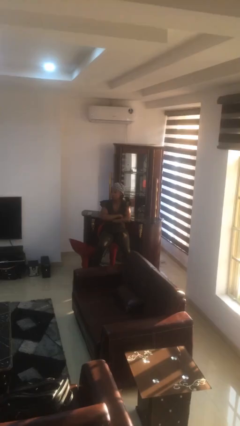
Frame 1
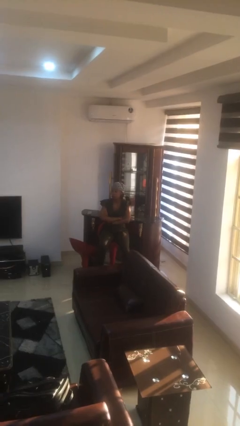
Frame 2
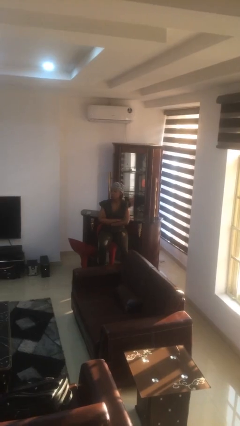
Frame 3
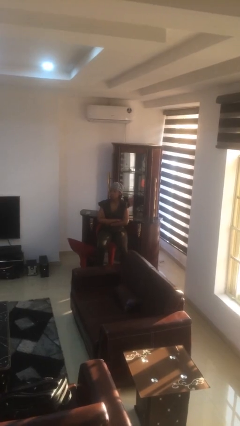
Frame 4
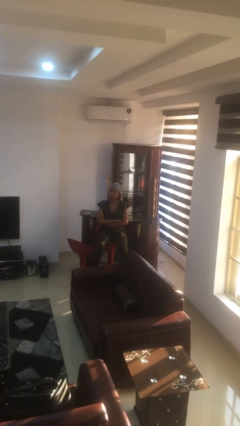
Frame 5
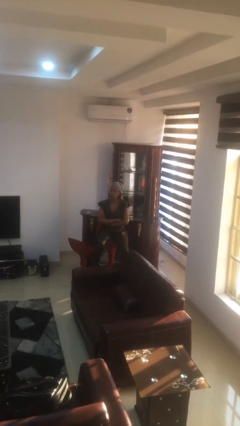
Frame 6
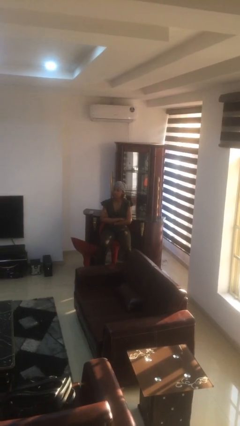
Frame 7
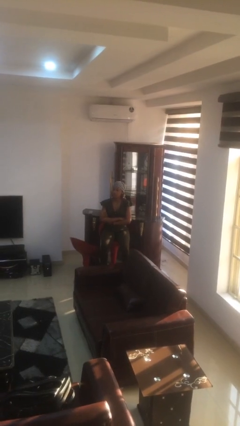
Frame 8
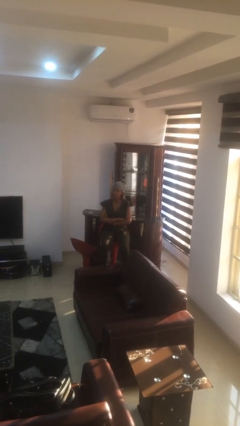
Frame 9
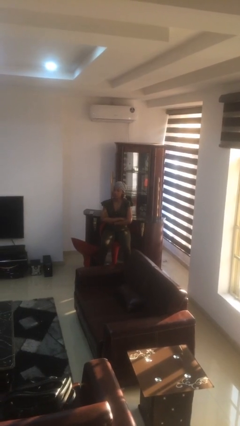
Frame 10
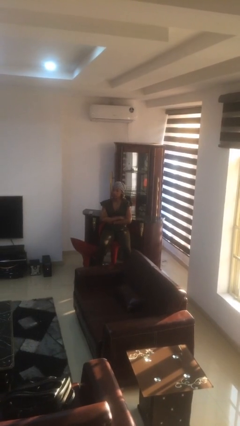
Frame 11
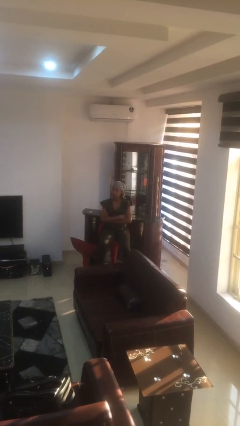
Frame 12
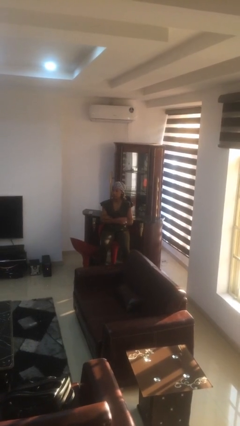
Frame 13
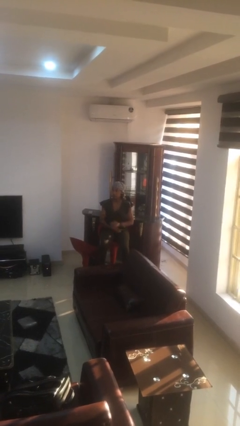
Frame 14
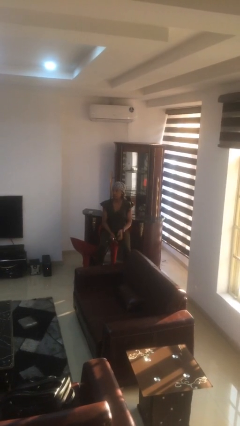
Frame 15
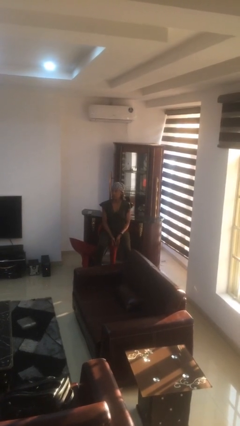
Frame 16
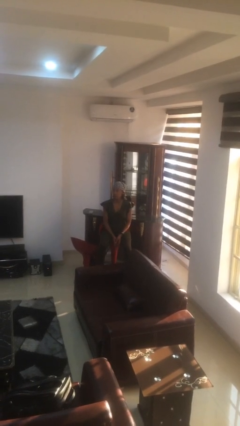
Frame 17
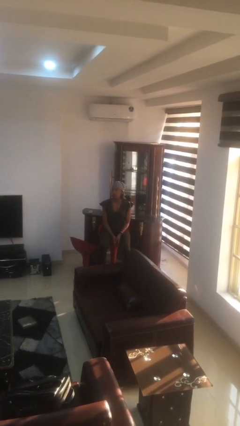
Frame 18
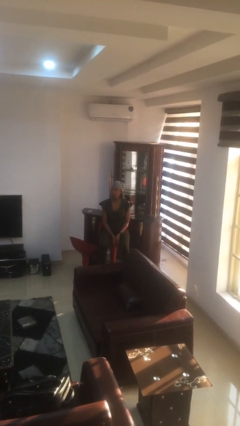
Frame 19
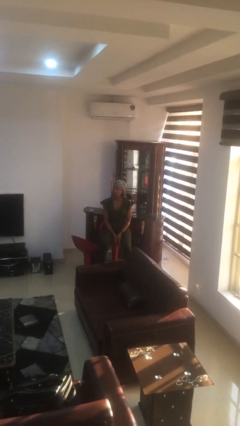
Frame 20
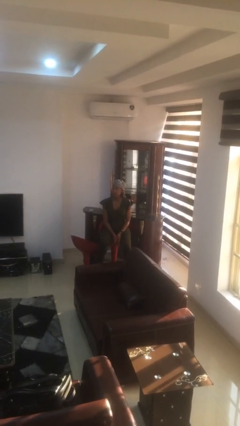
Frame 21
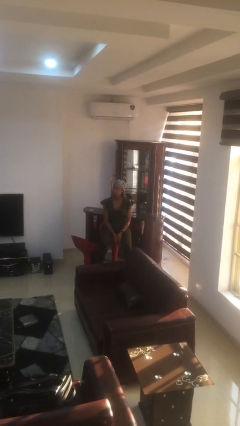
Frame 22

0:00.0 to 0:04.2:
person crosses arms

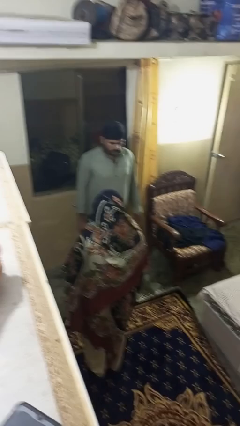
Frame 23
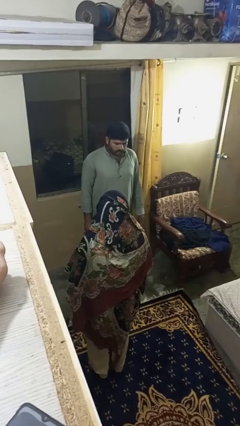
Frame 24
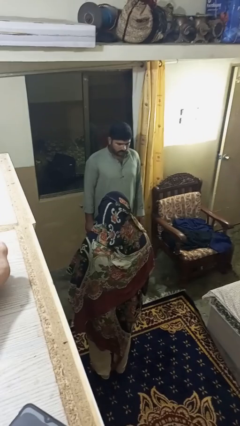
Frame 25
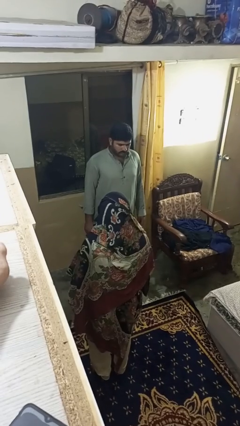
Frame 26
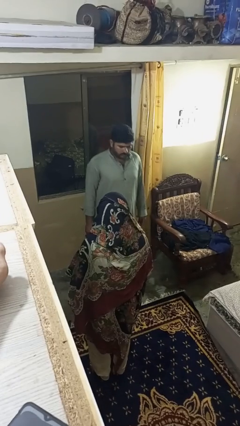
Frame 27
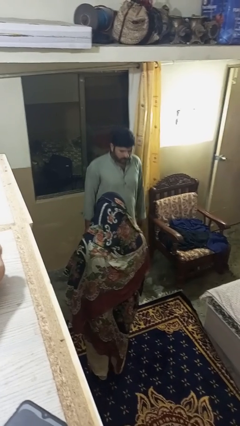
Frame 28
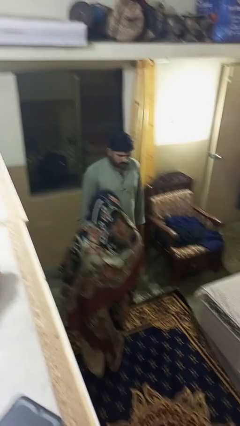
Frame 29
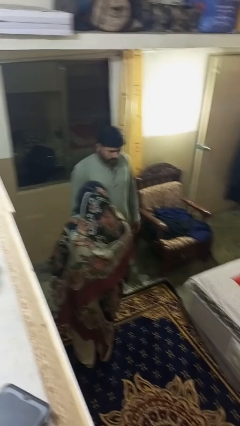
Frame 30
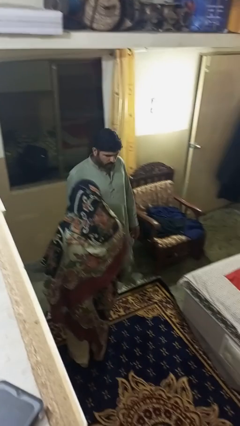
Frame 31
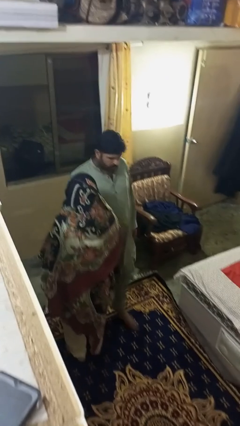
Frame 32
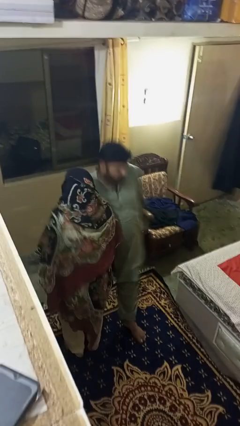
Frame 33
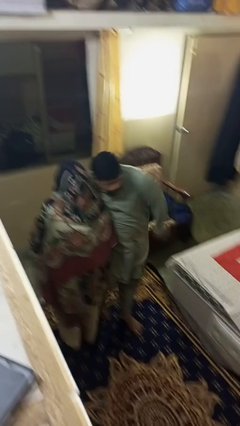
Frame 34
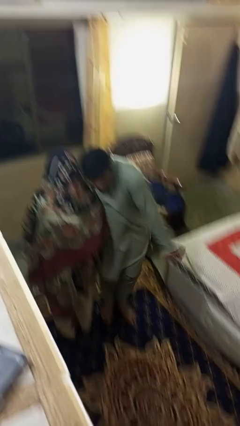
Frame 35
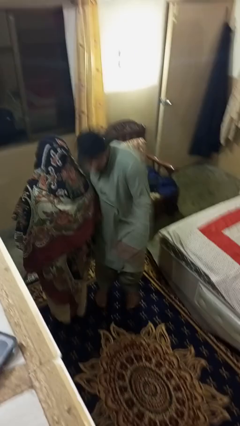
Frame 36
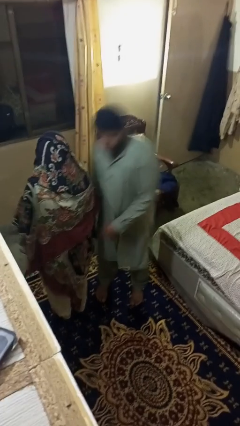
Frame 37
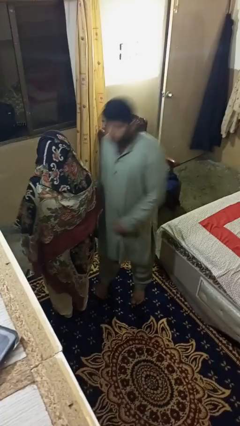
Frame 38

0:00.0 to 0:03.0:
person bumps into person

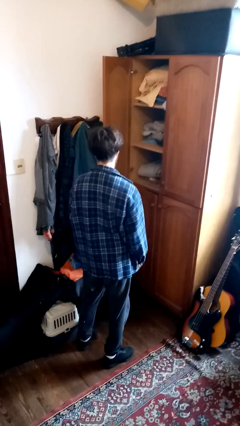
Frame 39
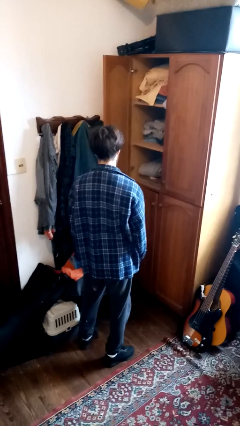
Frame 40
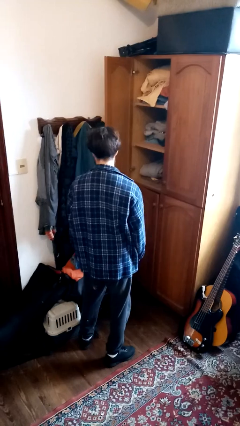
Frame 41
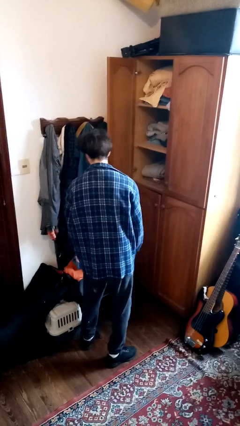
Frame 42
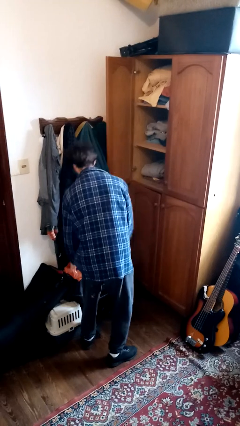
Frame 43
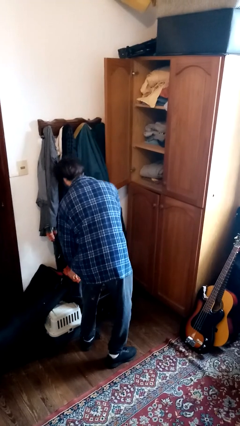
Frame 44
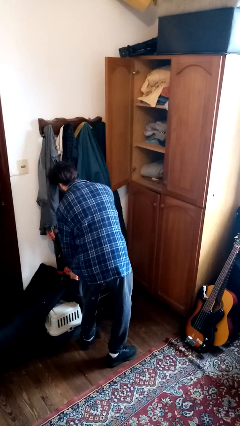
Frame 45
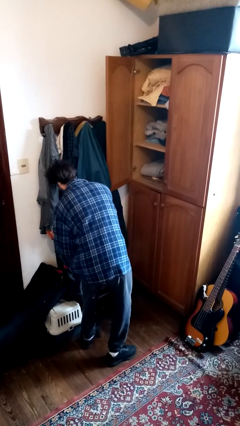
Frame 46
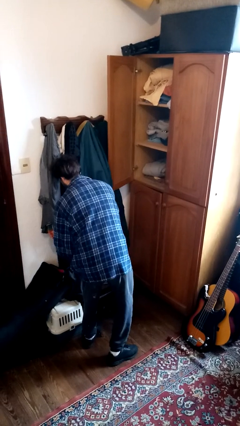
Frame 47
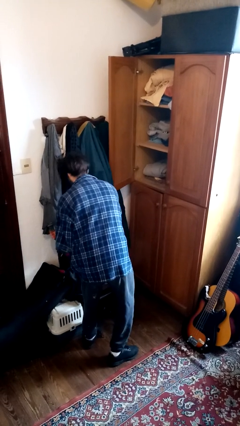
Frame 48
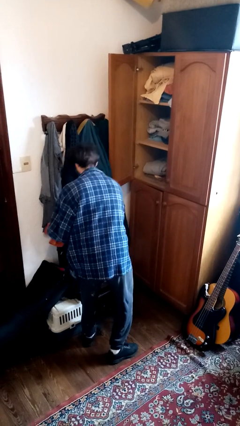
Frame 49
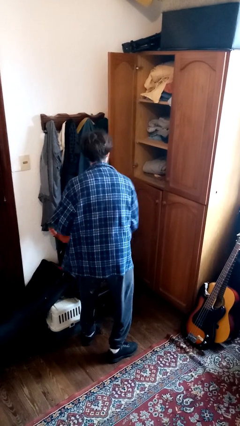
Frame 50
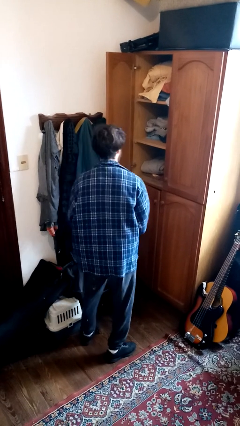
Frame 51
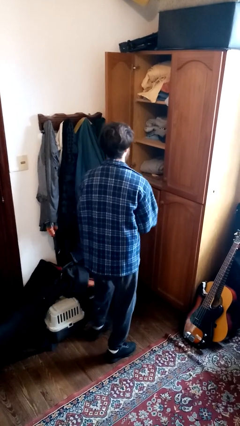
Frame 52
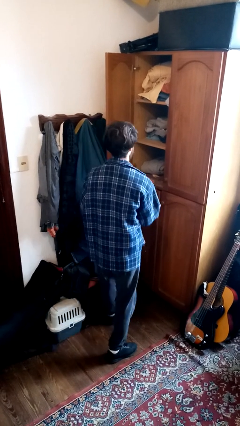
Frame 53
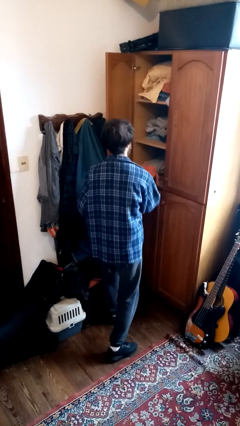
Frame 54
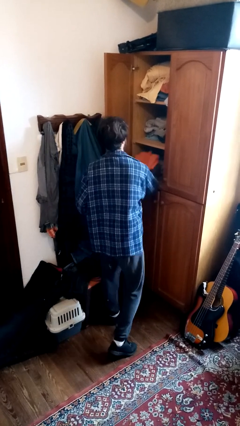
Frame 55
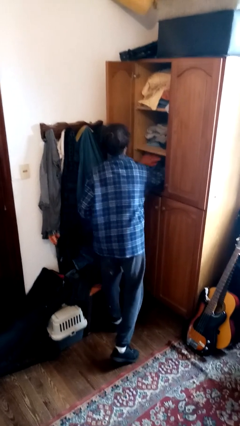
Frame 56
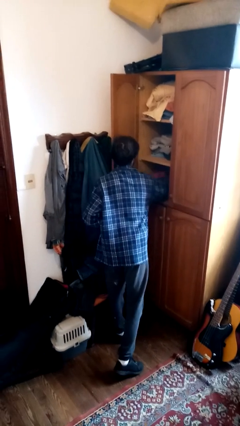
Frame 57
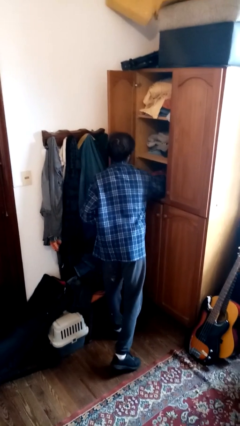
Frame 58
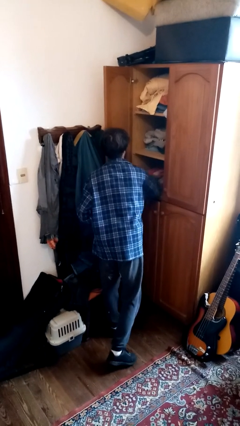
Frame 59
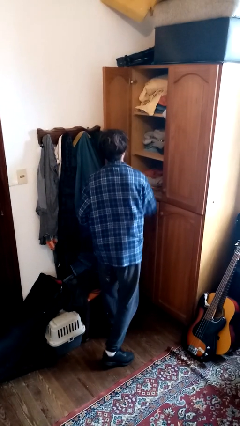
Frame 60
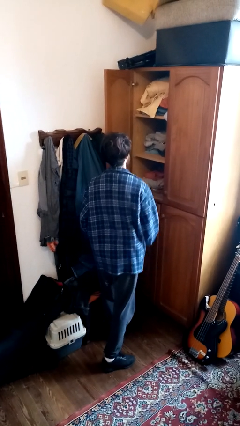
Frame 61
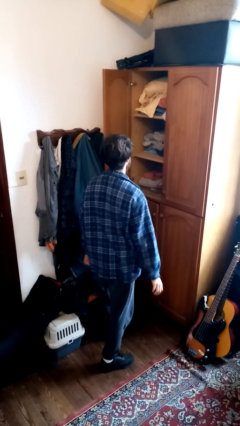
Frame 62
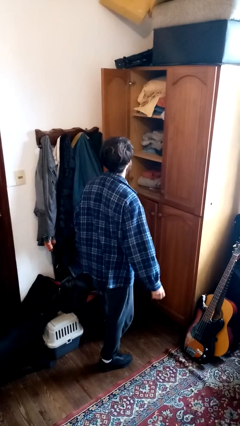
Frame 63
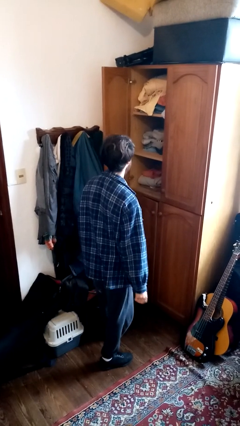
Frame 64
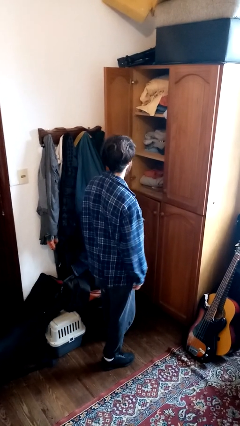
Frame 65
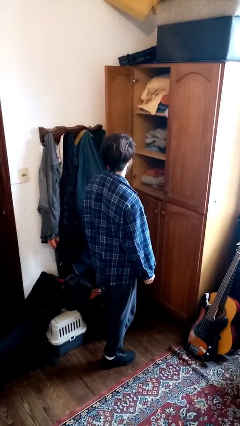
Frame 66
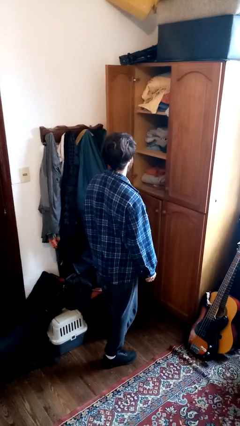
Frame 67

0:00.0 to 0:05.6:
person puts clothes into dresser

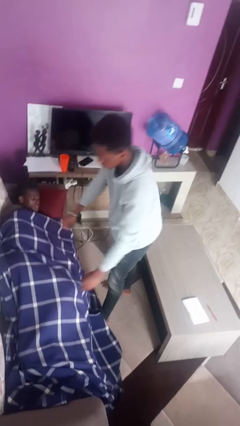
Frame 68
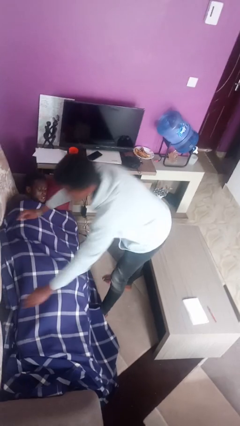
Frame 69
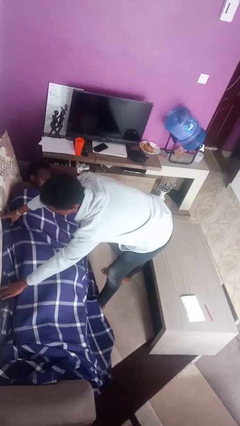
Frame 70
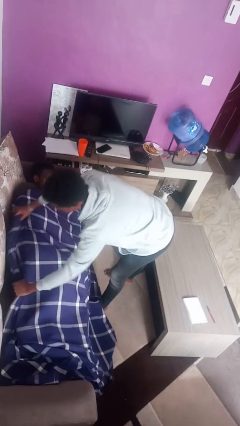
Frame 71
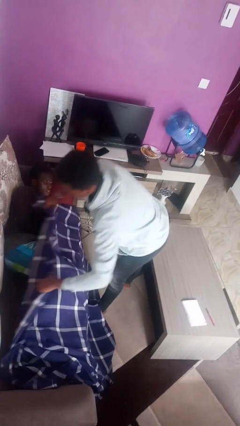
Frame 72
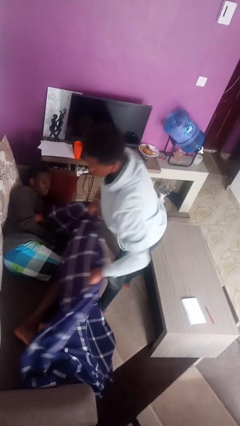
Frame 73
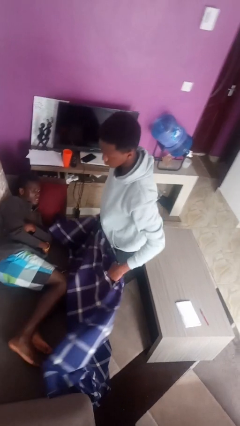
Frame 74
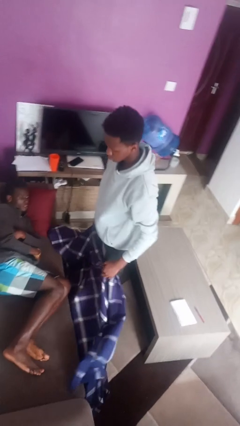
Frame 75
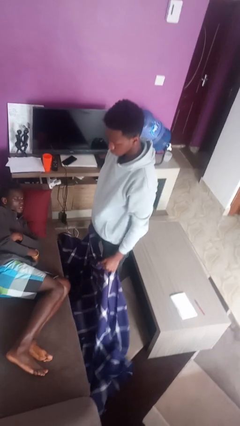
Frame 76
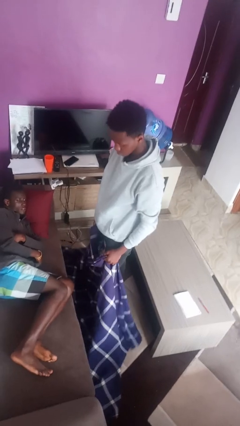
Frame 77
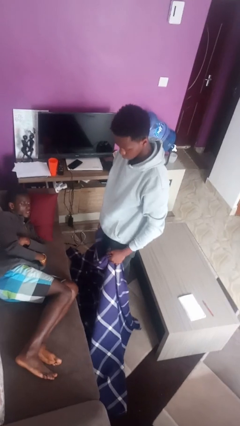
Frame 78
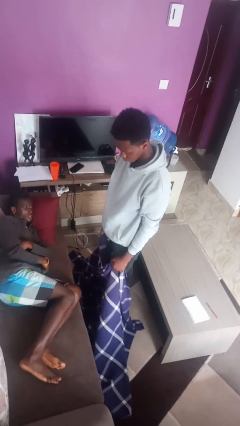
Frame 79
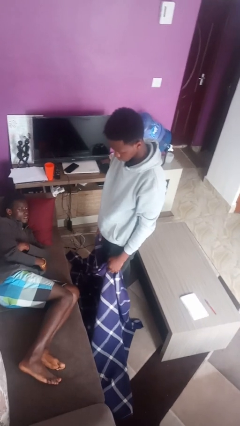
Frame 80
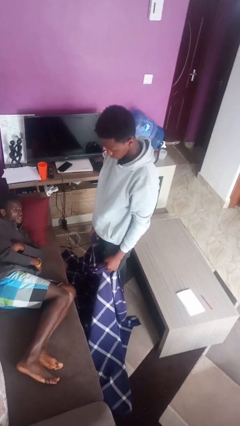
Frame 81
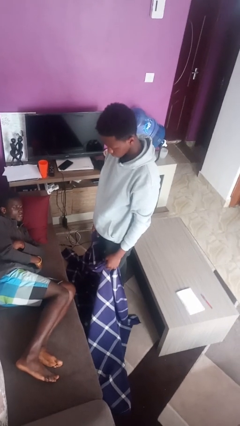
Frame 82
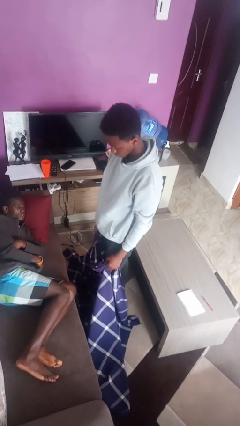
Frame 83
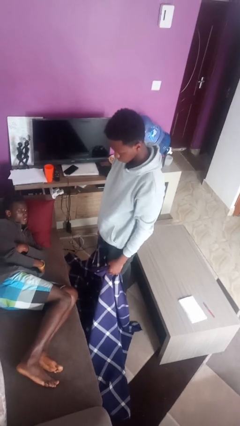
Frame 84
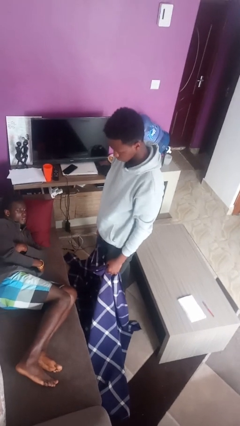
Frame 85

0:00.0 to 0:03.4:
person uncovers friend with blanket

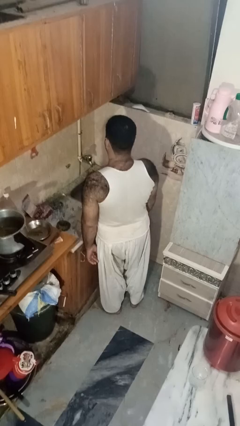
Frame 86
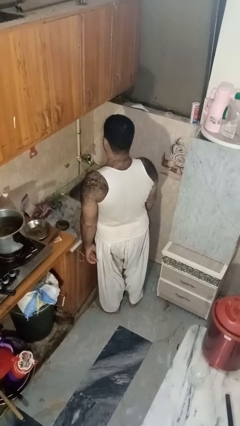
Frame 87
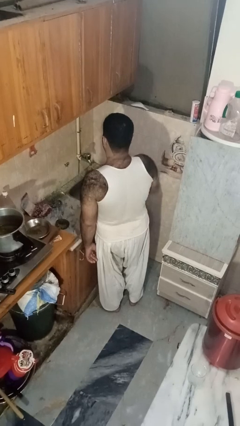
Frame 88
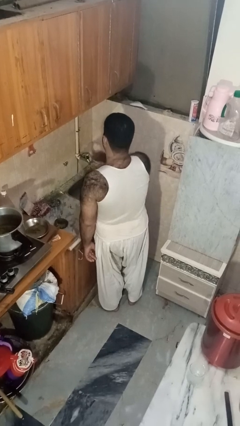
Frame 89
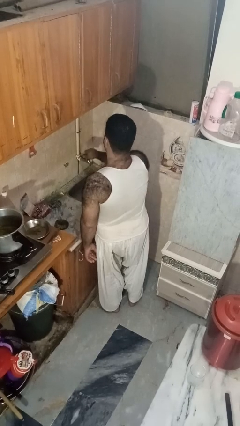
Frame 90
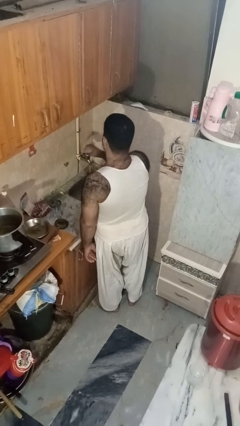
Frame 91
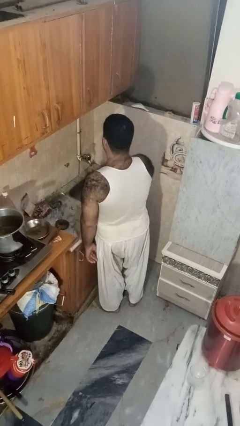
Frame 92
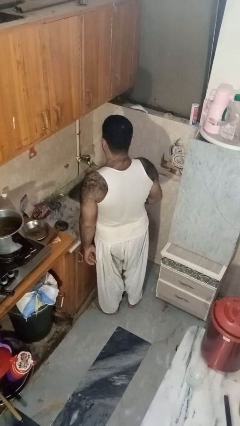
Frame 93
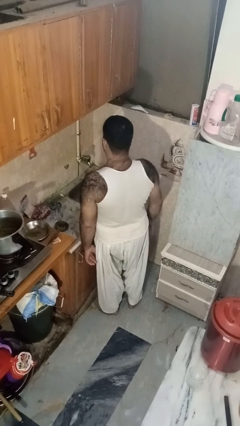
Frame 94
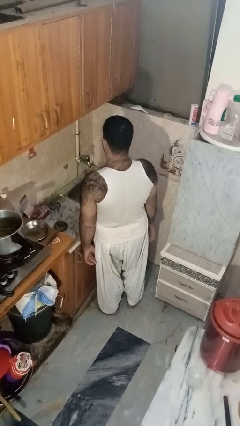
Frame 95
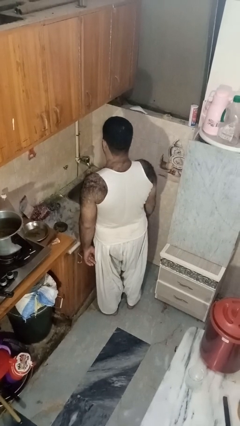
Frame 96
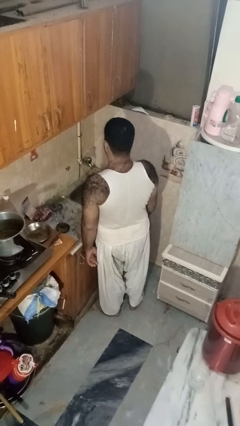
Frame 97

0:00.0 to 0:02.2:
person turns on faucet
